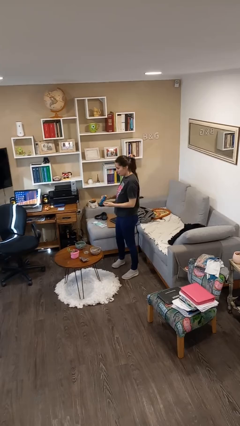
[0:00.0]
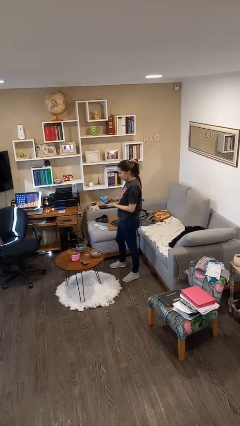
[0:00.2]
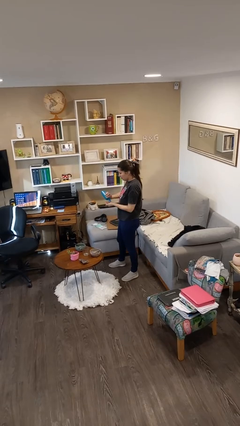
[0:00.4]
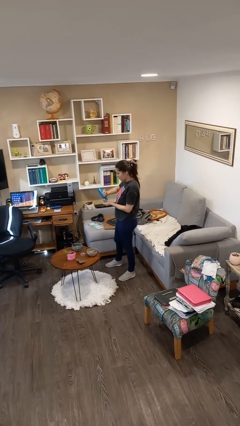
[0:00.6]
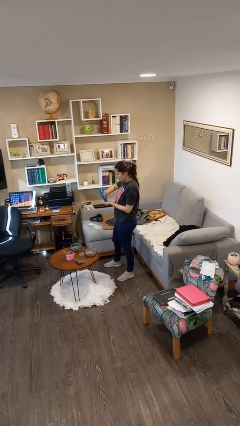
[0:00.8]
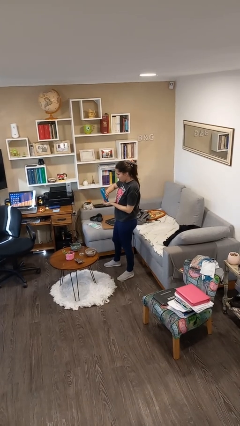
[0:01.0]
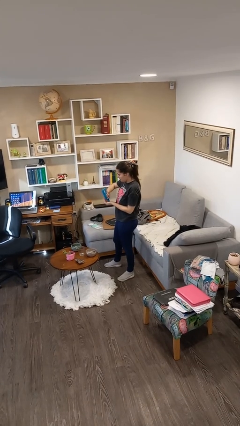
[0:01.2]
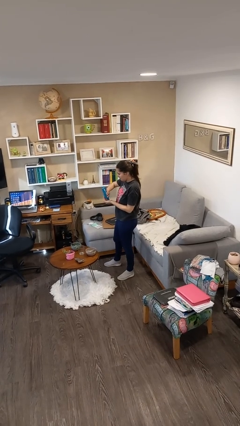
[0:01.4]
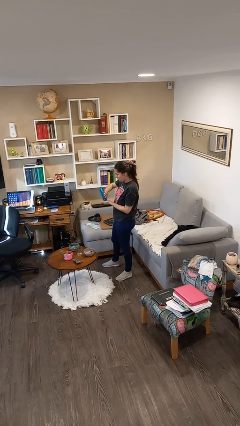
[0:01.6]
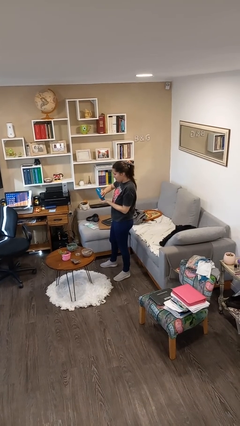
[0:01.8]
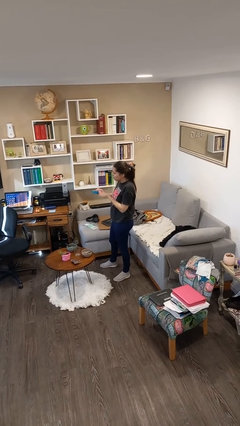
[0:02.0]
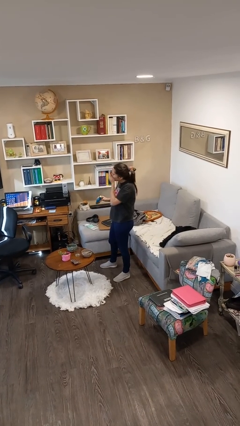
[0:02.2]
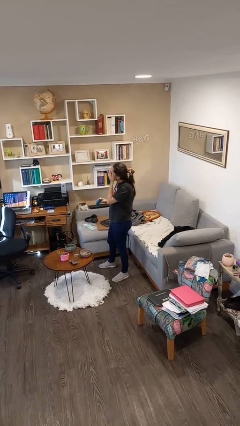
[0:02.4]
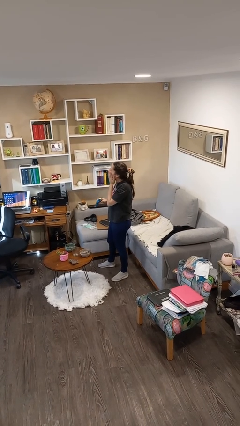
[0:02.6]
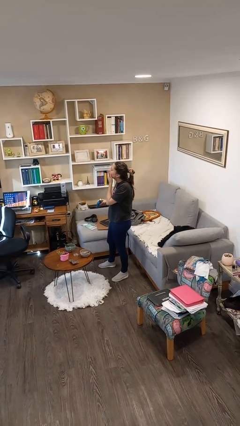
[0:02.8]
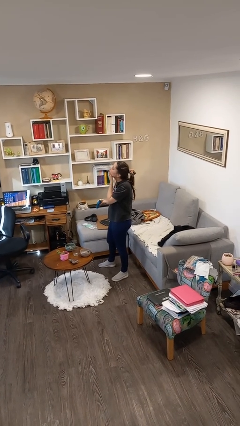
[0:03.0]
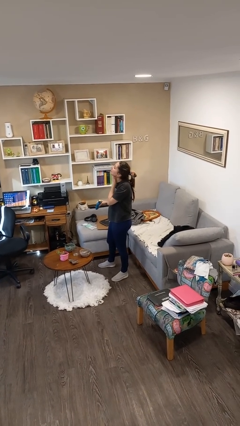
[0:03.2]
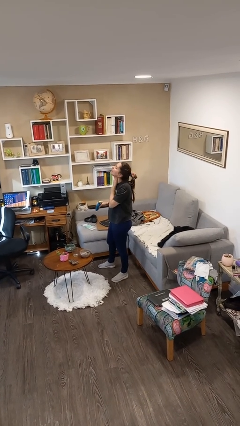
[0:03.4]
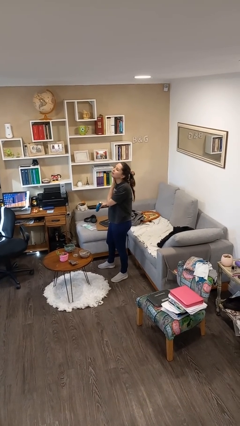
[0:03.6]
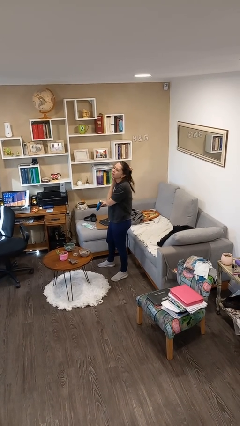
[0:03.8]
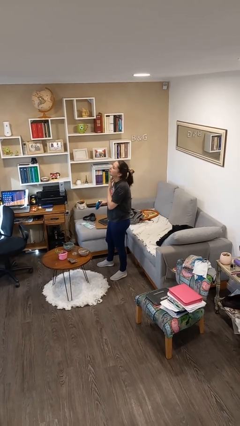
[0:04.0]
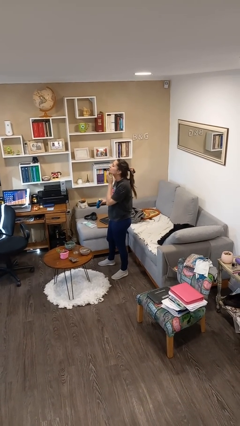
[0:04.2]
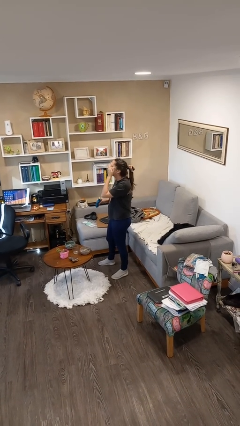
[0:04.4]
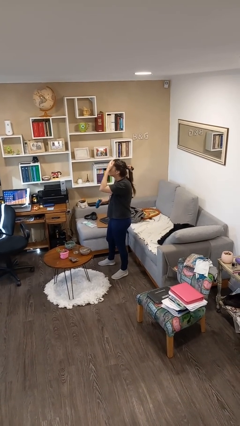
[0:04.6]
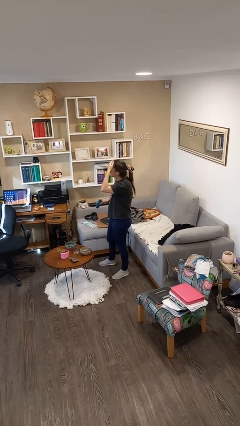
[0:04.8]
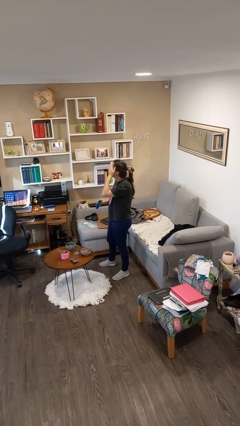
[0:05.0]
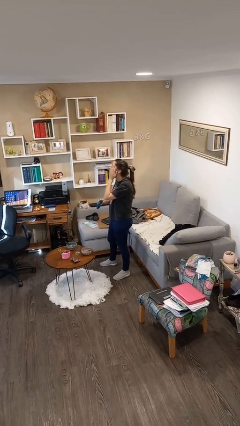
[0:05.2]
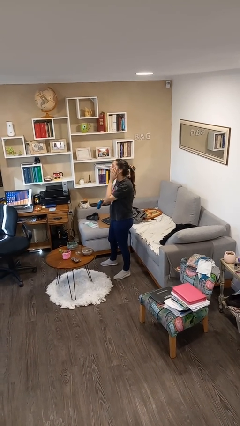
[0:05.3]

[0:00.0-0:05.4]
person applies facial moisturizer

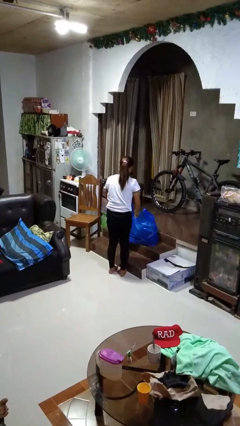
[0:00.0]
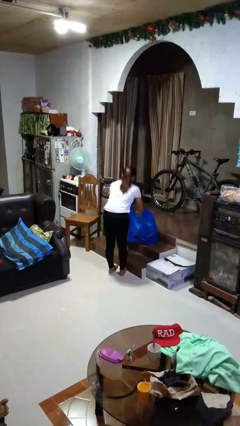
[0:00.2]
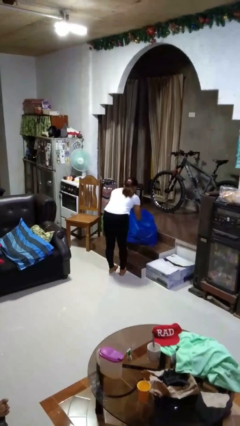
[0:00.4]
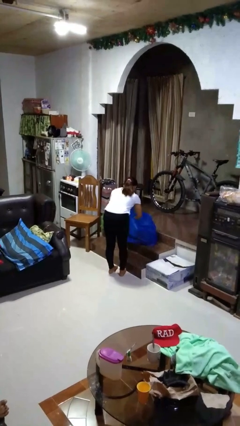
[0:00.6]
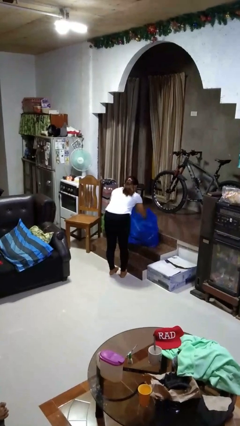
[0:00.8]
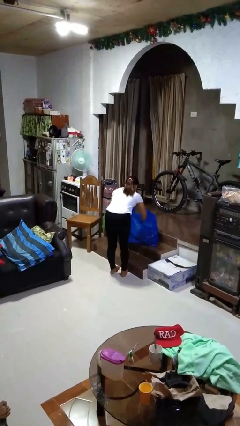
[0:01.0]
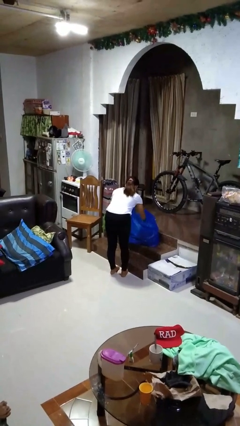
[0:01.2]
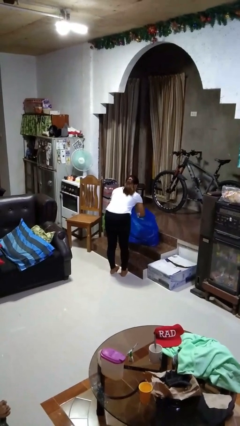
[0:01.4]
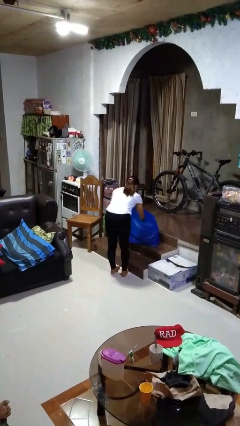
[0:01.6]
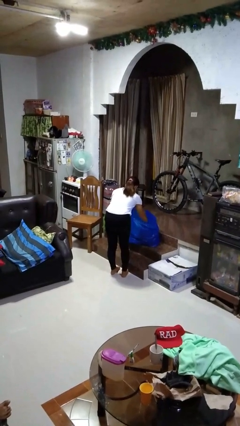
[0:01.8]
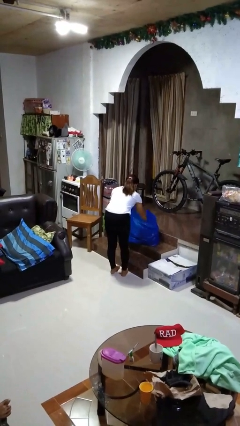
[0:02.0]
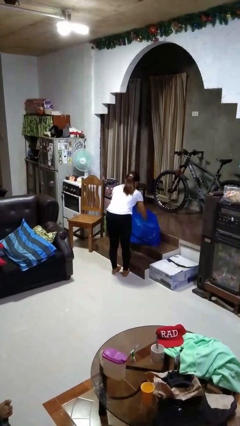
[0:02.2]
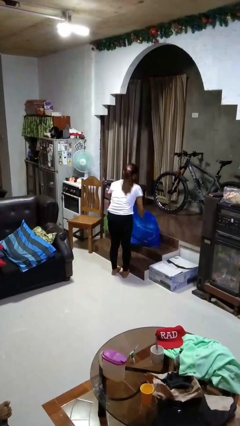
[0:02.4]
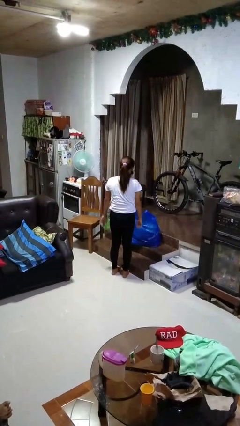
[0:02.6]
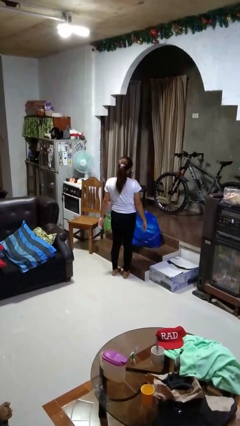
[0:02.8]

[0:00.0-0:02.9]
person searches in bag

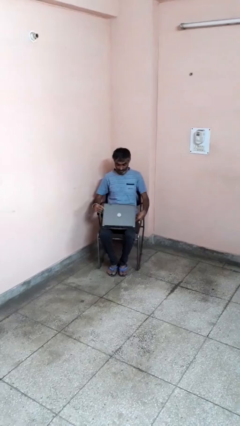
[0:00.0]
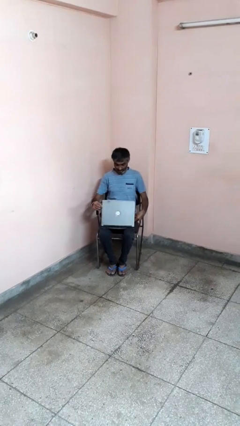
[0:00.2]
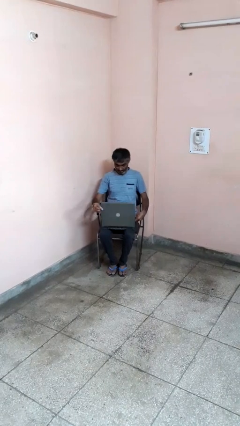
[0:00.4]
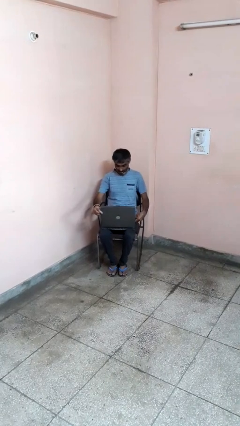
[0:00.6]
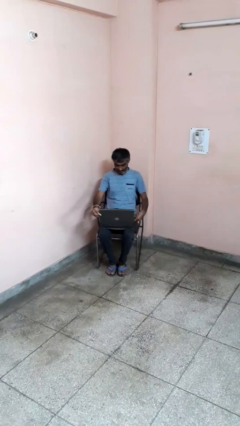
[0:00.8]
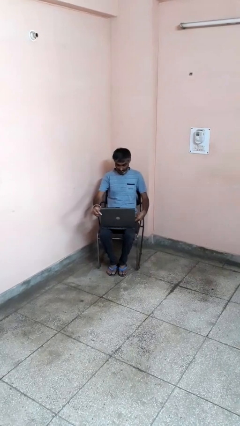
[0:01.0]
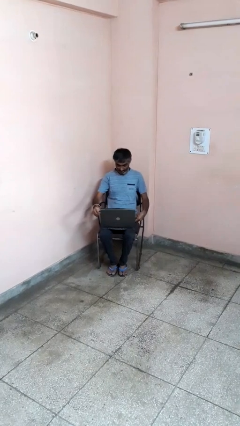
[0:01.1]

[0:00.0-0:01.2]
person opens laptop

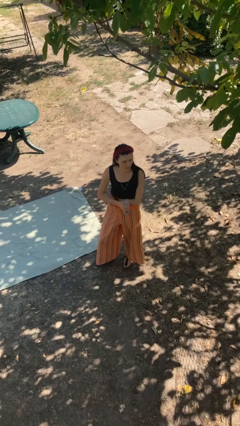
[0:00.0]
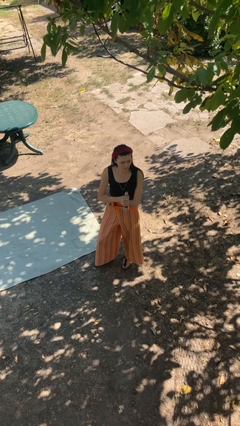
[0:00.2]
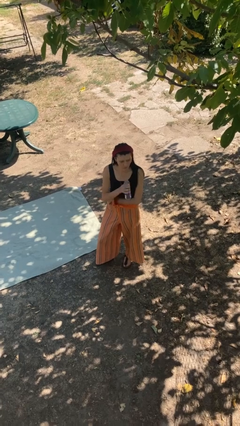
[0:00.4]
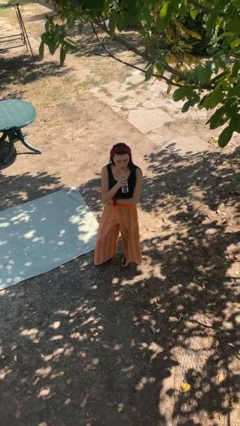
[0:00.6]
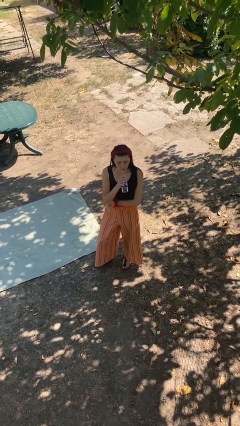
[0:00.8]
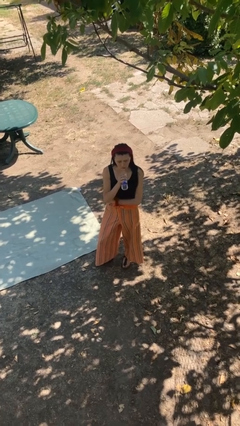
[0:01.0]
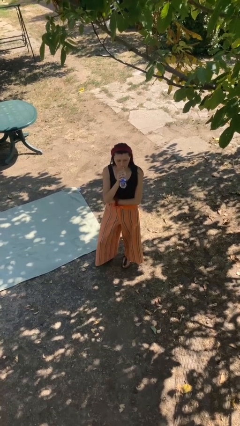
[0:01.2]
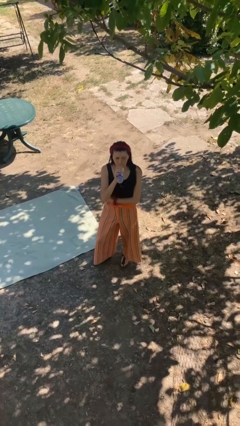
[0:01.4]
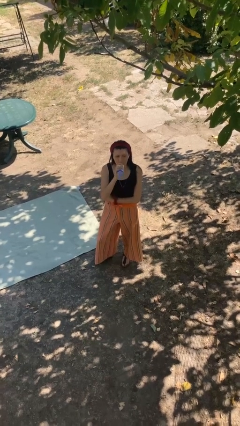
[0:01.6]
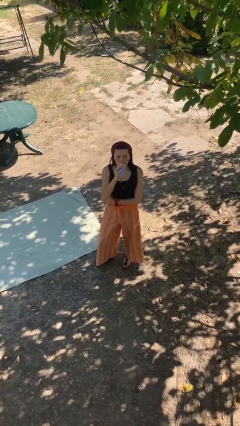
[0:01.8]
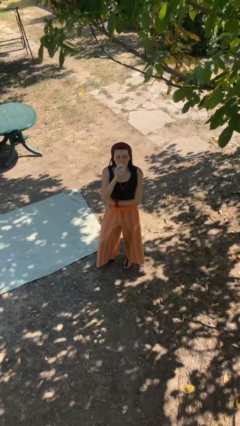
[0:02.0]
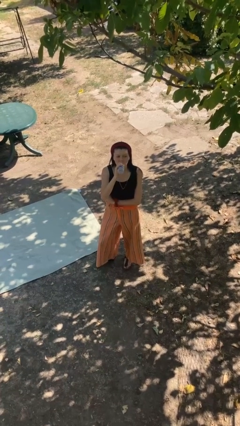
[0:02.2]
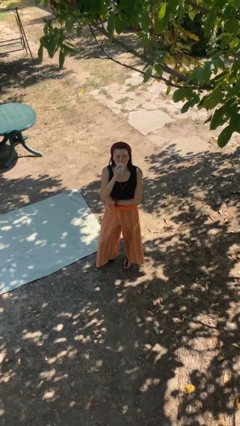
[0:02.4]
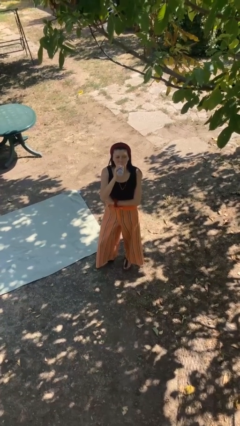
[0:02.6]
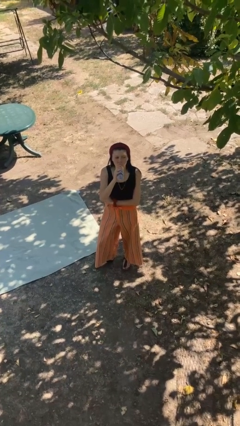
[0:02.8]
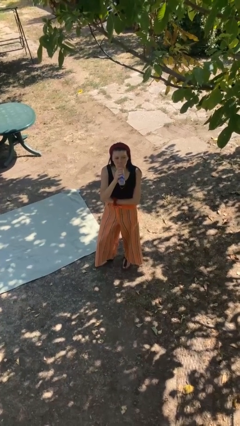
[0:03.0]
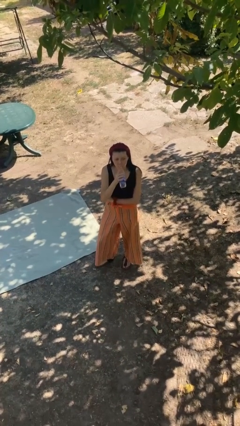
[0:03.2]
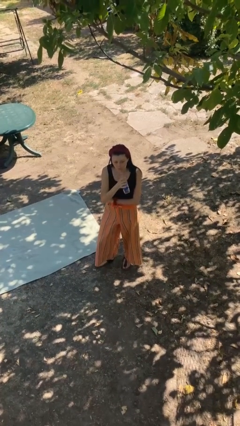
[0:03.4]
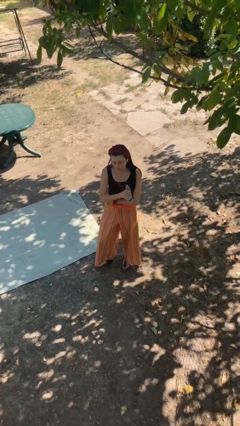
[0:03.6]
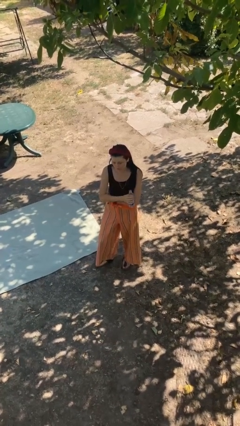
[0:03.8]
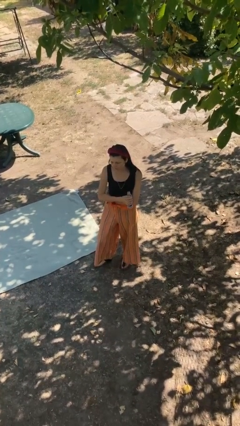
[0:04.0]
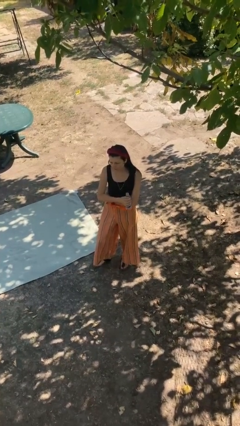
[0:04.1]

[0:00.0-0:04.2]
person drinks from bottle

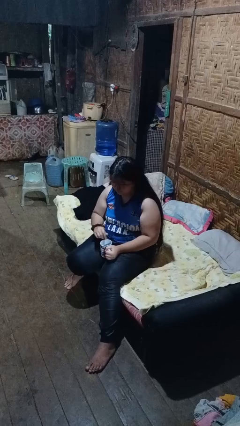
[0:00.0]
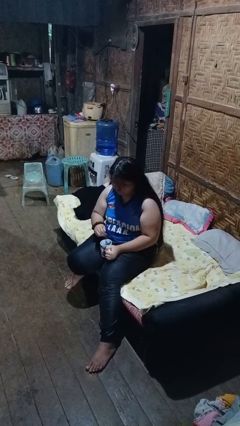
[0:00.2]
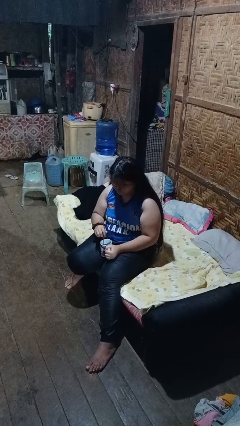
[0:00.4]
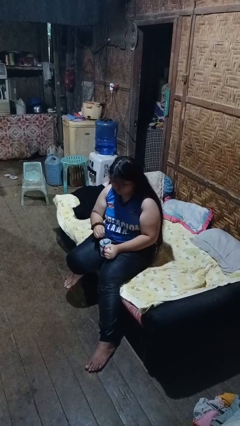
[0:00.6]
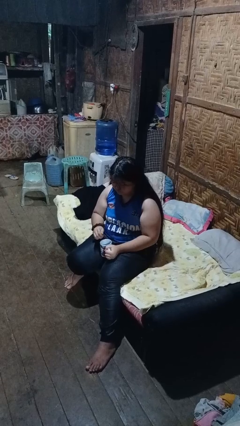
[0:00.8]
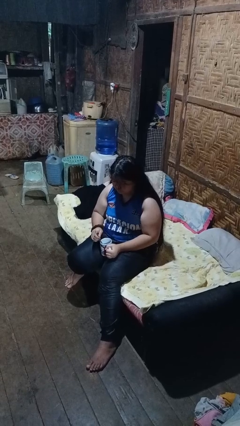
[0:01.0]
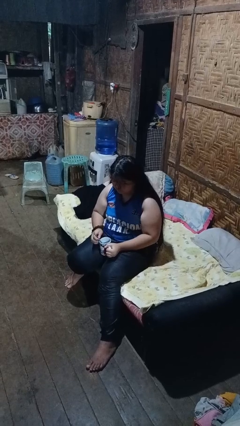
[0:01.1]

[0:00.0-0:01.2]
person stirs mug

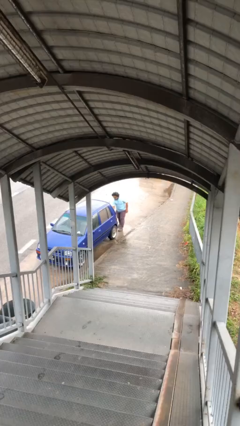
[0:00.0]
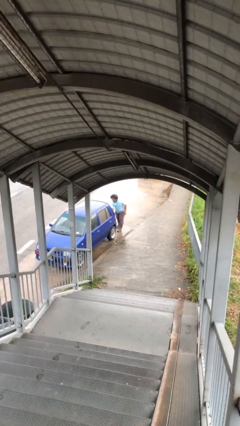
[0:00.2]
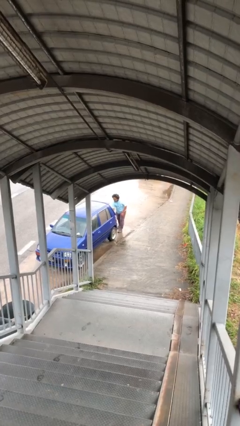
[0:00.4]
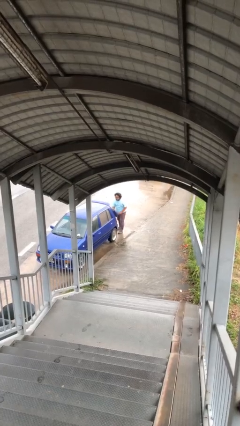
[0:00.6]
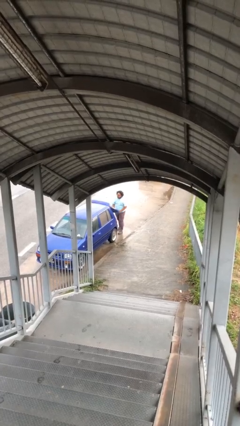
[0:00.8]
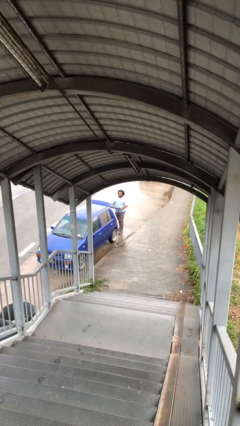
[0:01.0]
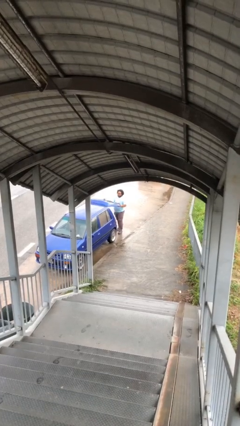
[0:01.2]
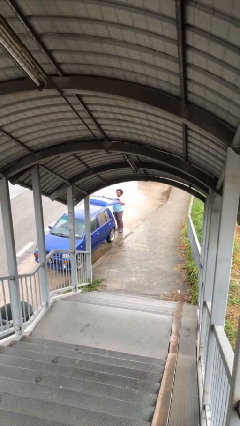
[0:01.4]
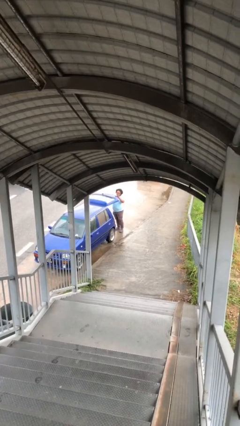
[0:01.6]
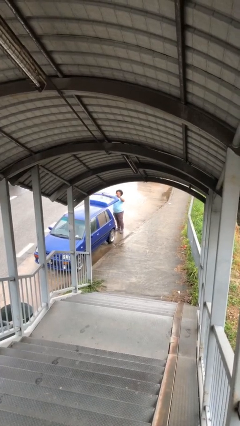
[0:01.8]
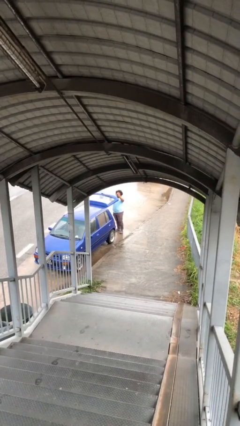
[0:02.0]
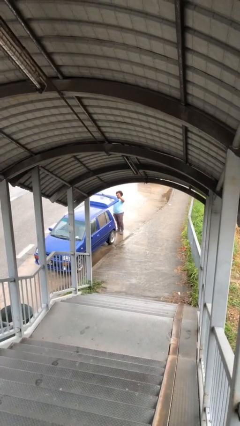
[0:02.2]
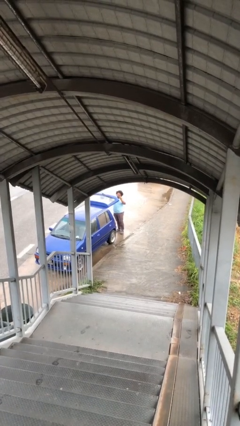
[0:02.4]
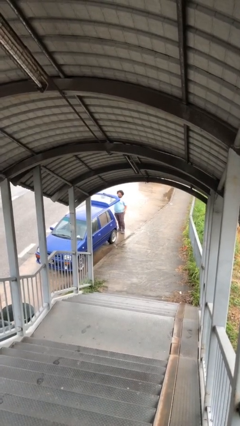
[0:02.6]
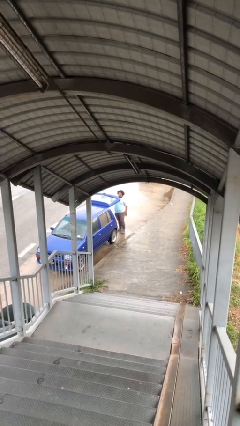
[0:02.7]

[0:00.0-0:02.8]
person opens car trunk
